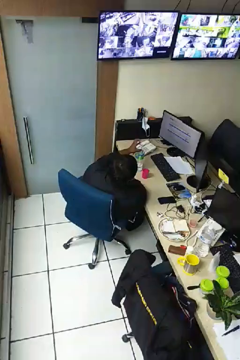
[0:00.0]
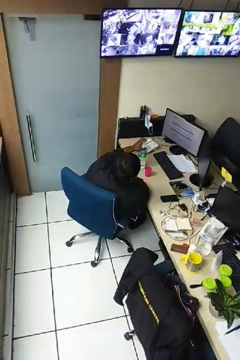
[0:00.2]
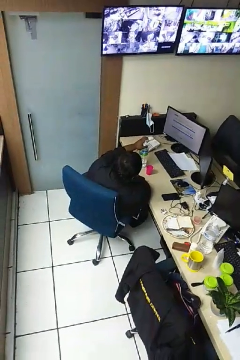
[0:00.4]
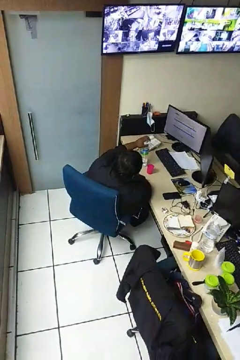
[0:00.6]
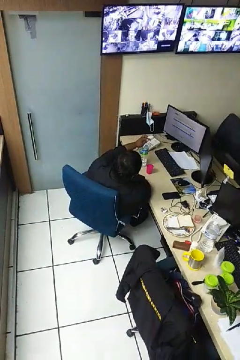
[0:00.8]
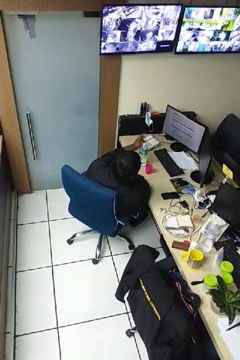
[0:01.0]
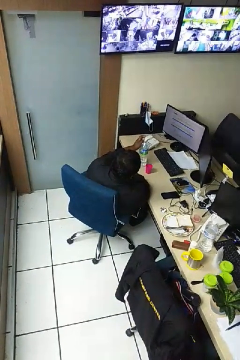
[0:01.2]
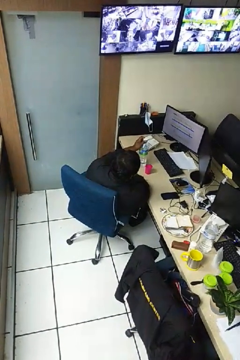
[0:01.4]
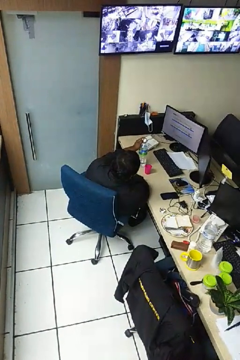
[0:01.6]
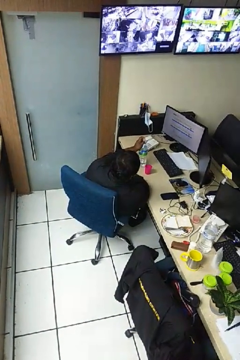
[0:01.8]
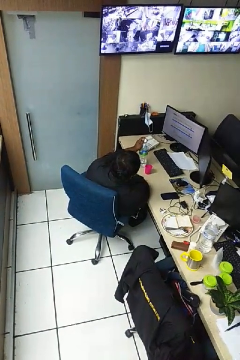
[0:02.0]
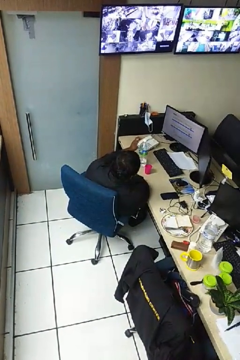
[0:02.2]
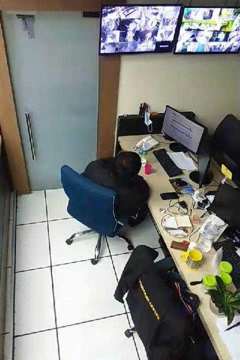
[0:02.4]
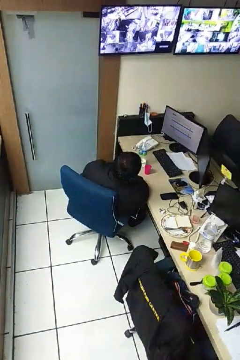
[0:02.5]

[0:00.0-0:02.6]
person screws lid to bottle

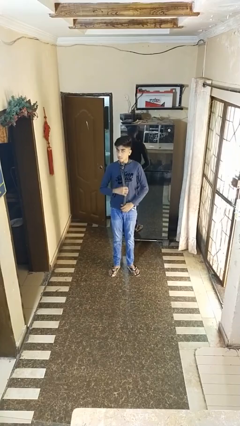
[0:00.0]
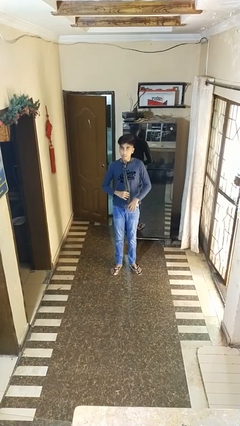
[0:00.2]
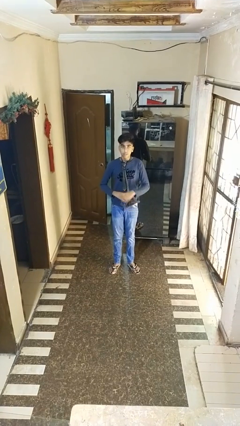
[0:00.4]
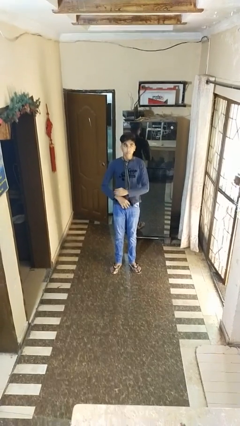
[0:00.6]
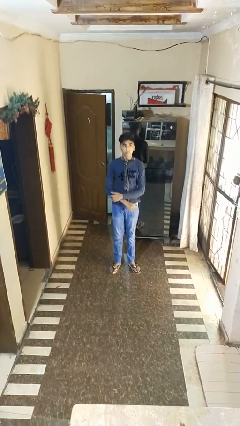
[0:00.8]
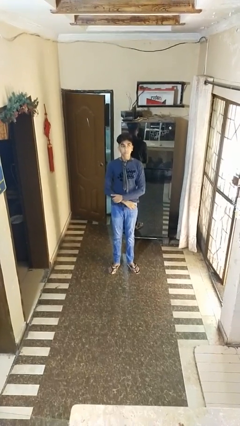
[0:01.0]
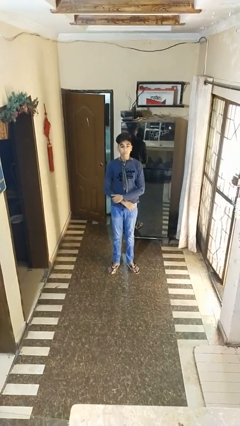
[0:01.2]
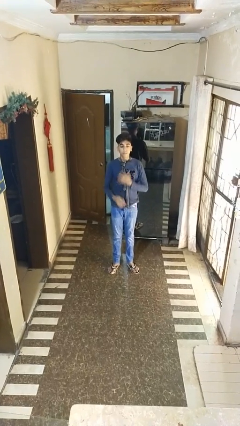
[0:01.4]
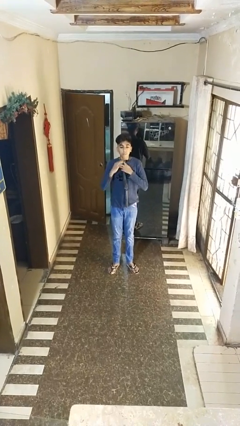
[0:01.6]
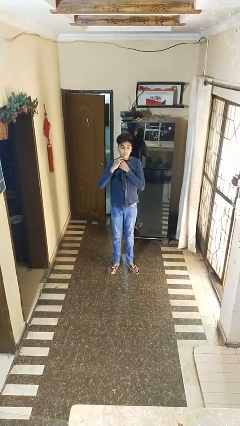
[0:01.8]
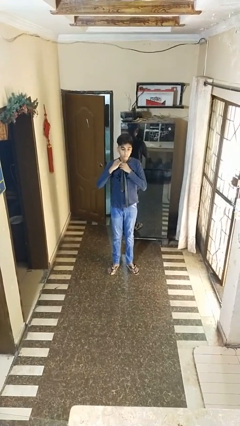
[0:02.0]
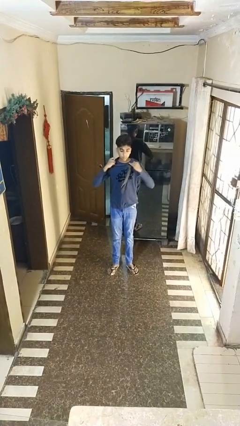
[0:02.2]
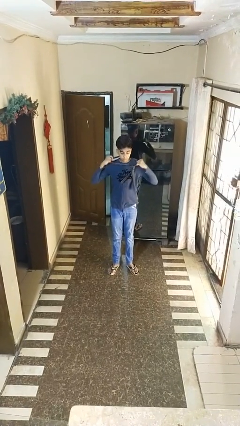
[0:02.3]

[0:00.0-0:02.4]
person takes off necktie

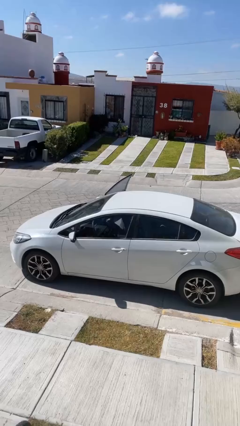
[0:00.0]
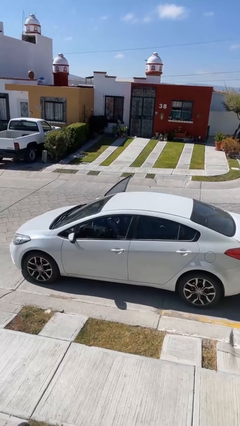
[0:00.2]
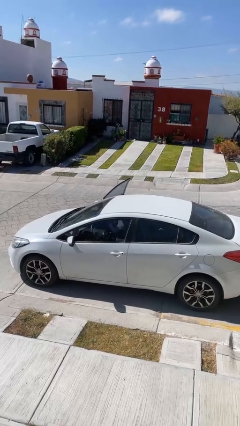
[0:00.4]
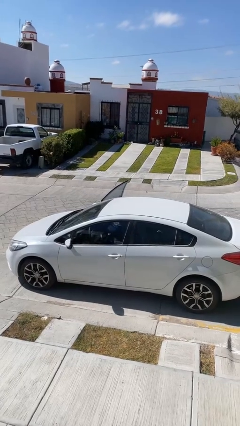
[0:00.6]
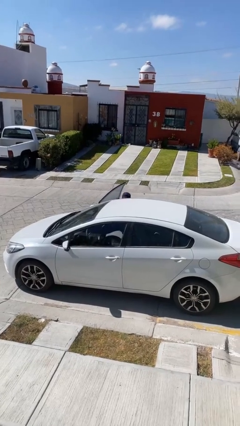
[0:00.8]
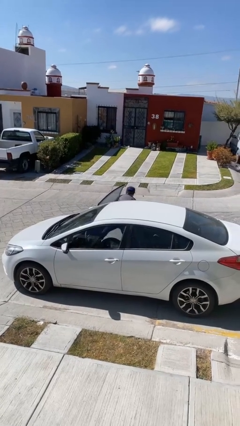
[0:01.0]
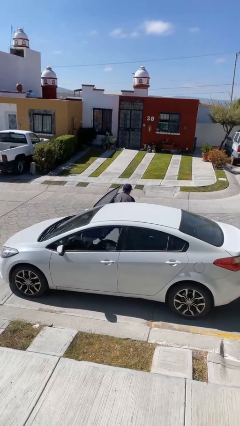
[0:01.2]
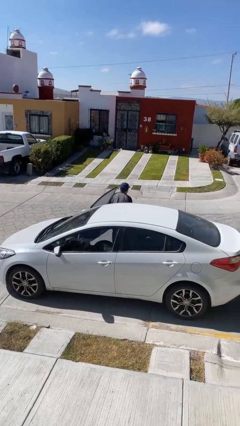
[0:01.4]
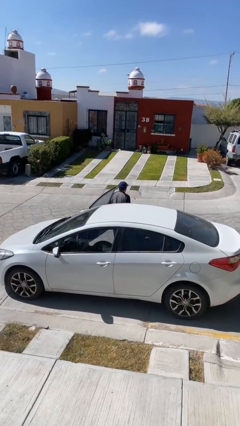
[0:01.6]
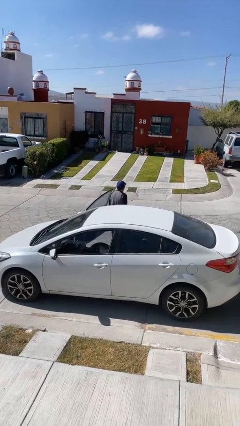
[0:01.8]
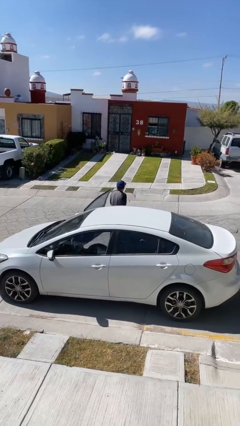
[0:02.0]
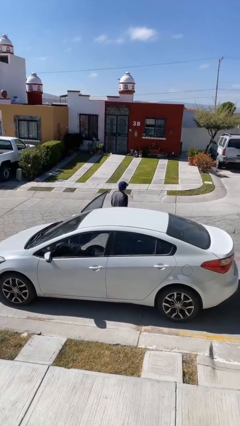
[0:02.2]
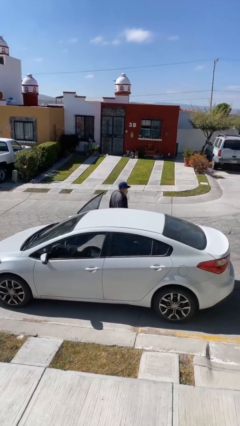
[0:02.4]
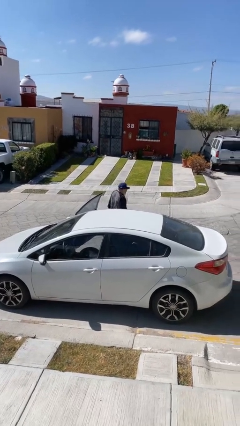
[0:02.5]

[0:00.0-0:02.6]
person exits car

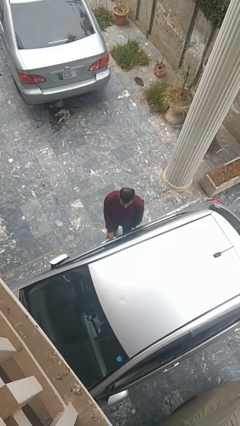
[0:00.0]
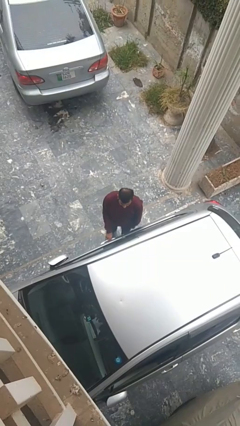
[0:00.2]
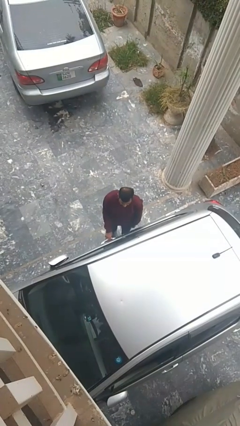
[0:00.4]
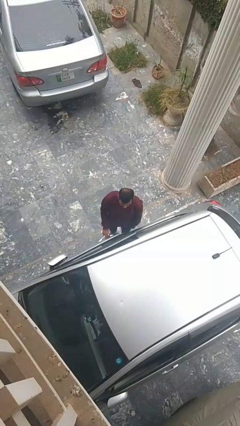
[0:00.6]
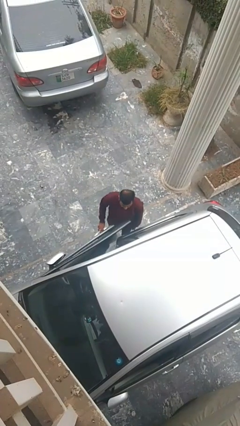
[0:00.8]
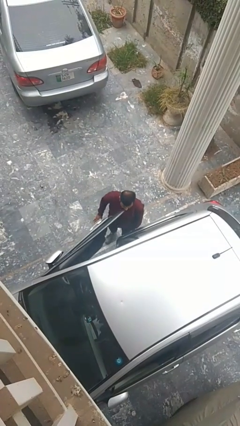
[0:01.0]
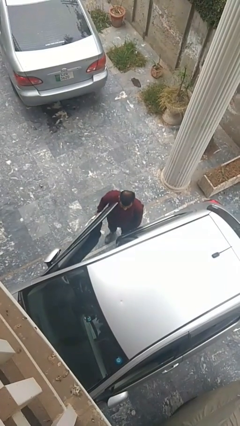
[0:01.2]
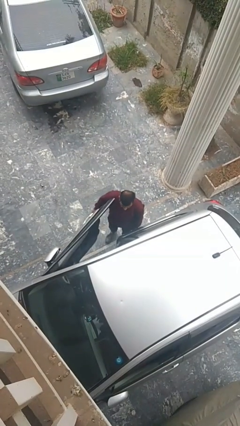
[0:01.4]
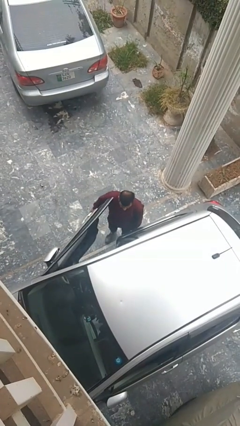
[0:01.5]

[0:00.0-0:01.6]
person opens car door

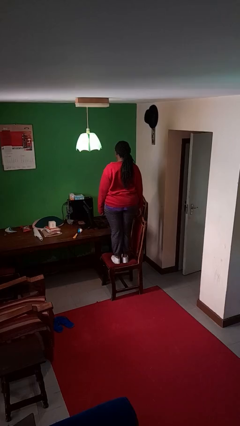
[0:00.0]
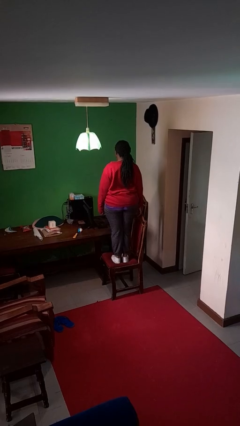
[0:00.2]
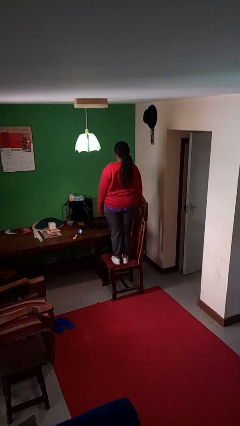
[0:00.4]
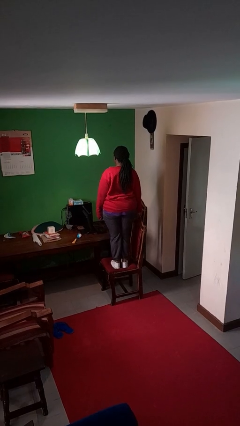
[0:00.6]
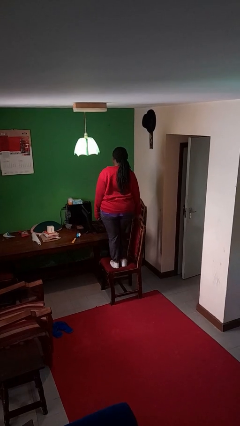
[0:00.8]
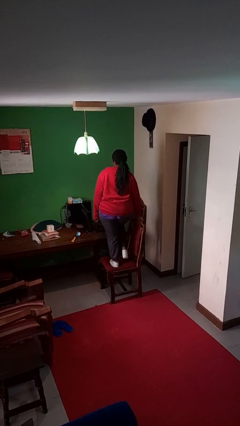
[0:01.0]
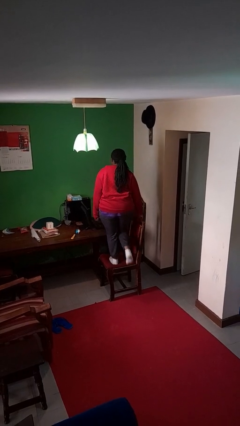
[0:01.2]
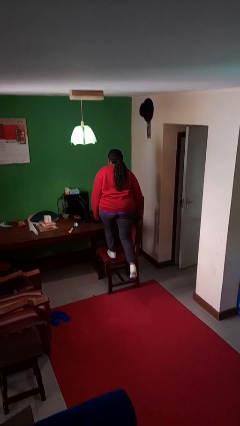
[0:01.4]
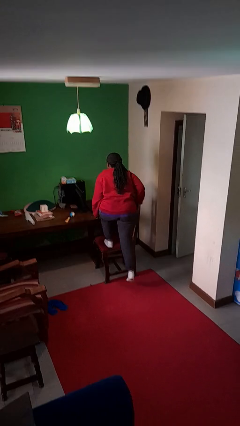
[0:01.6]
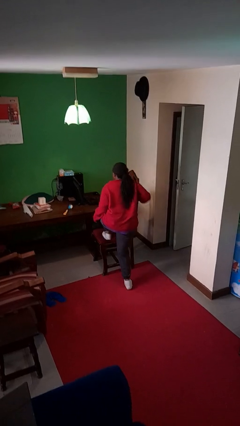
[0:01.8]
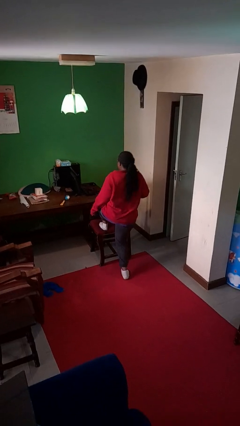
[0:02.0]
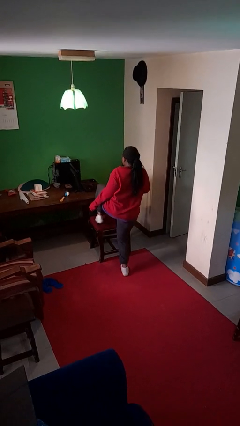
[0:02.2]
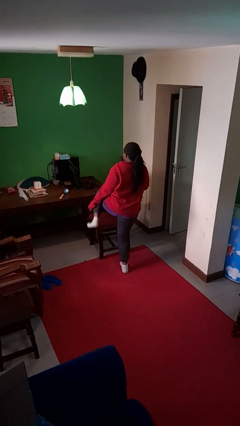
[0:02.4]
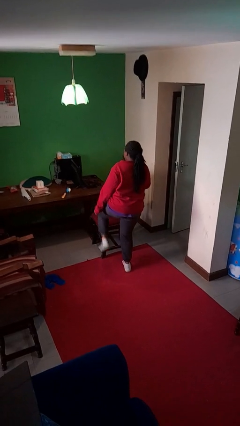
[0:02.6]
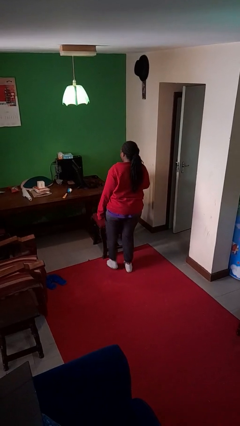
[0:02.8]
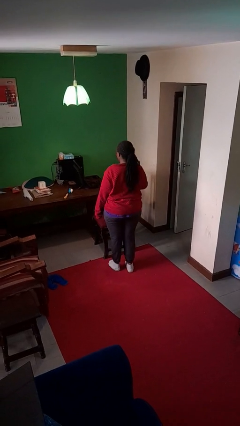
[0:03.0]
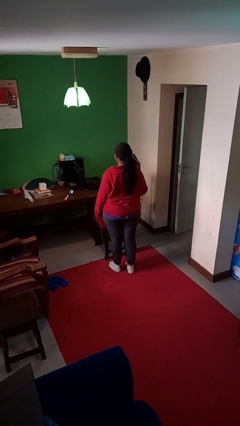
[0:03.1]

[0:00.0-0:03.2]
person climbs off chair

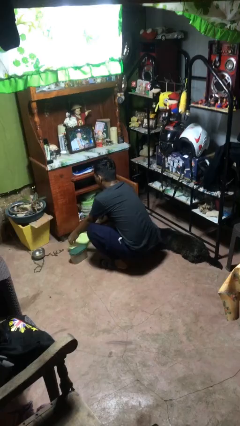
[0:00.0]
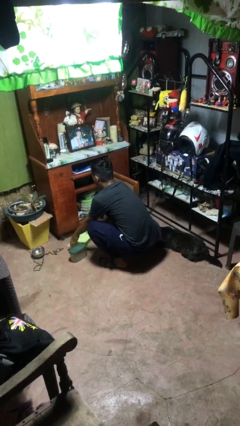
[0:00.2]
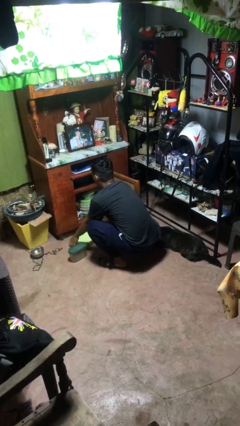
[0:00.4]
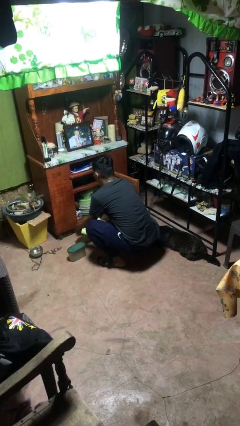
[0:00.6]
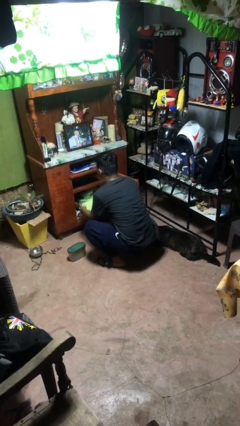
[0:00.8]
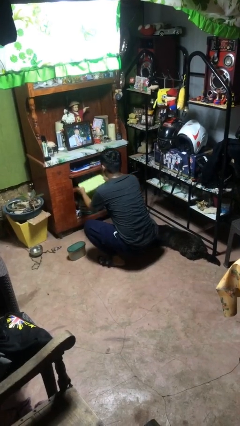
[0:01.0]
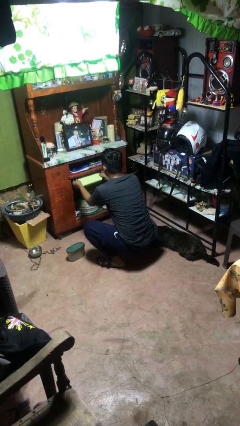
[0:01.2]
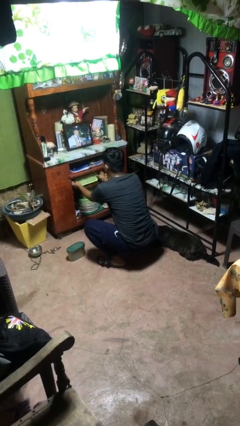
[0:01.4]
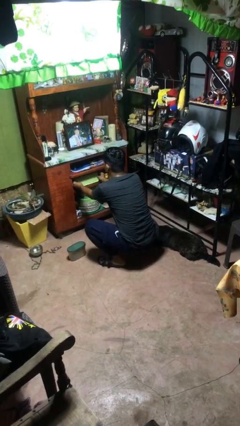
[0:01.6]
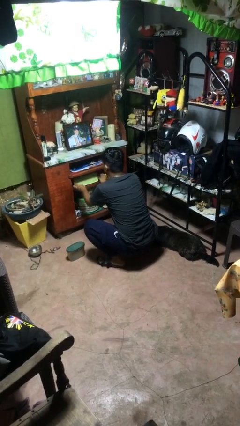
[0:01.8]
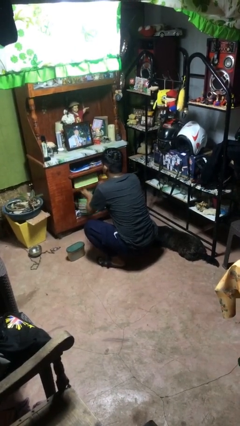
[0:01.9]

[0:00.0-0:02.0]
person puts object in cabinet

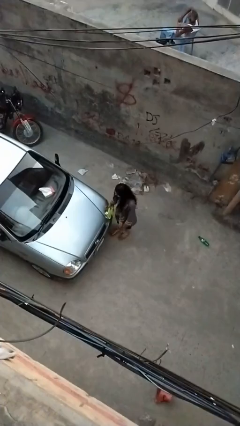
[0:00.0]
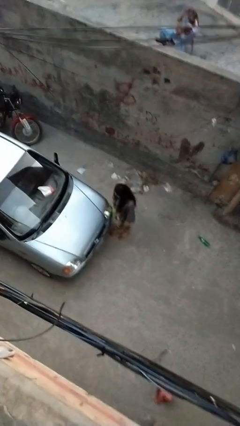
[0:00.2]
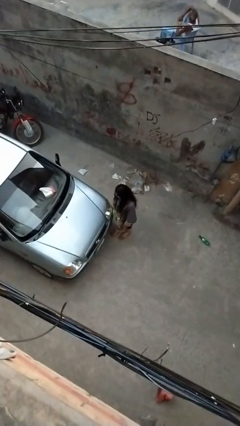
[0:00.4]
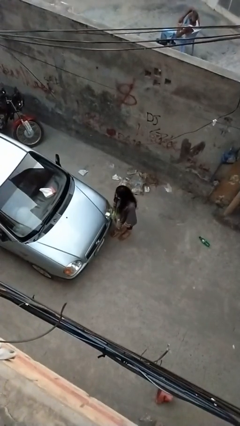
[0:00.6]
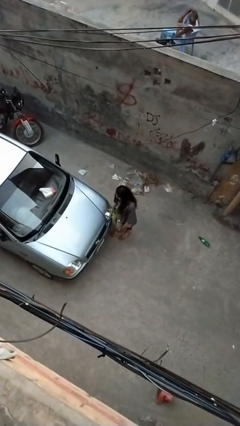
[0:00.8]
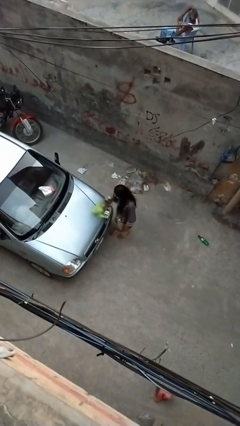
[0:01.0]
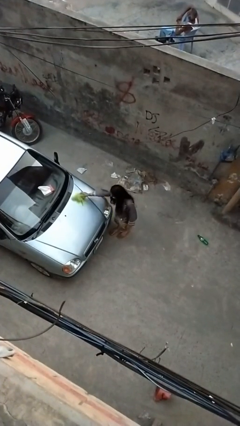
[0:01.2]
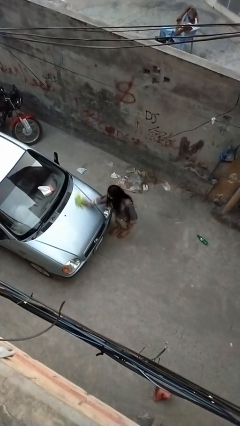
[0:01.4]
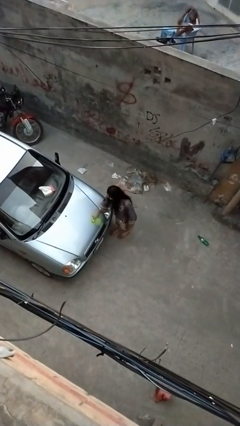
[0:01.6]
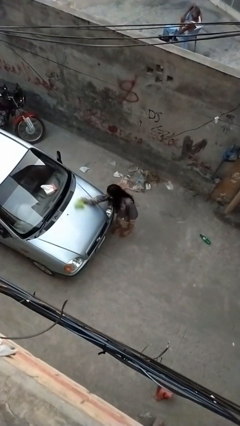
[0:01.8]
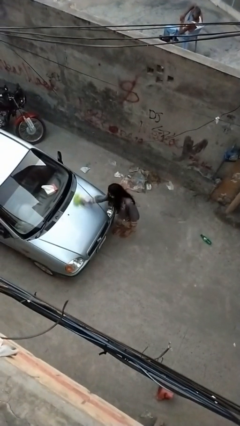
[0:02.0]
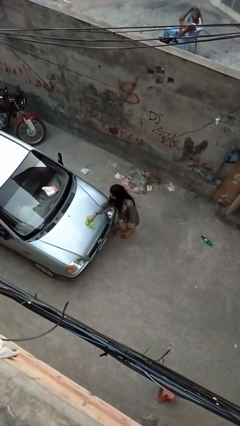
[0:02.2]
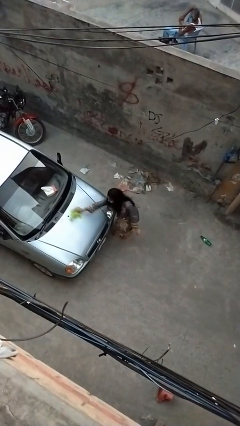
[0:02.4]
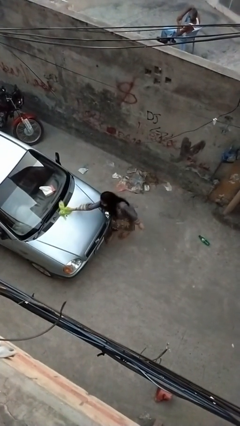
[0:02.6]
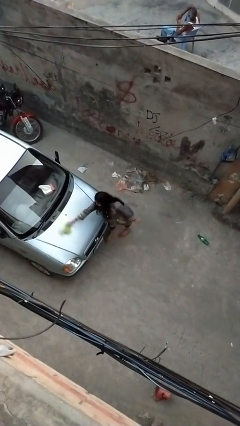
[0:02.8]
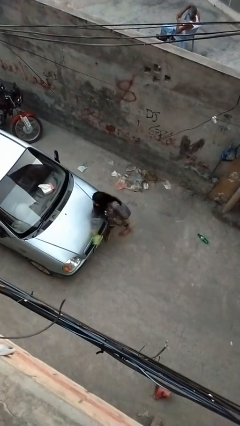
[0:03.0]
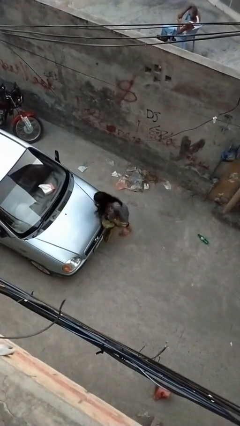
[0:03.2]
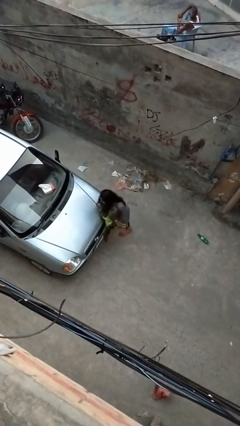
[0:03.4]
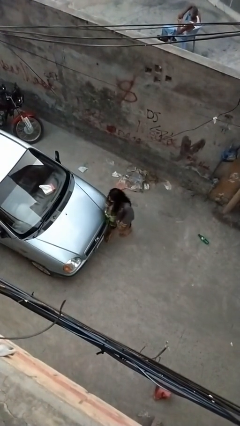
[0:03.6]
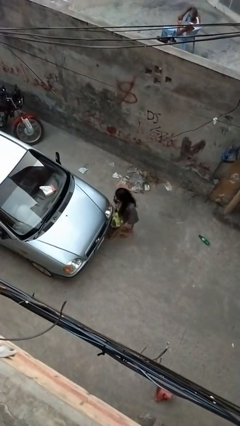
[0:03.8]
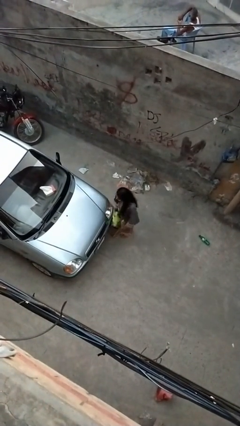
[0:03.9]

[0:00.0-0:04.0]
person polishes car with rag
